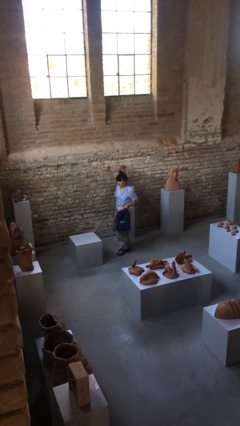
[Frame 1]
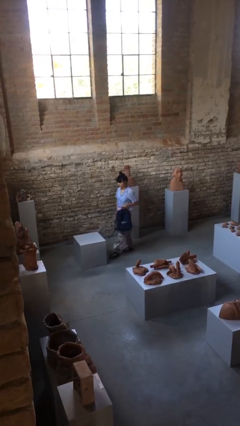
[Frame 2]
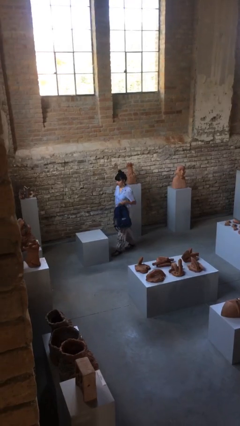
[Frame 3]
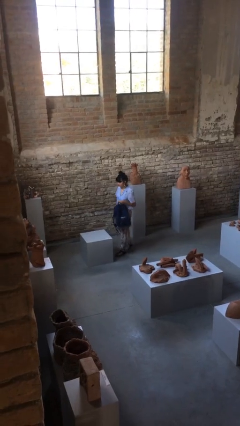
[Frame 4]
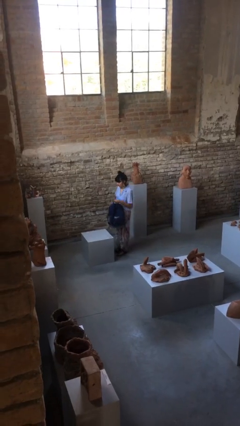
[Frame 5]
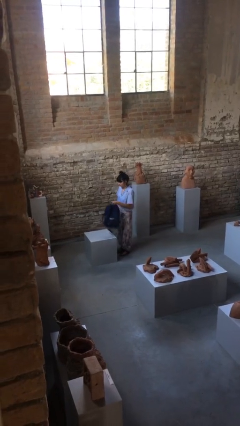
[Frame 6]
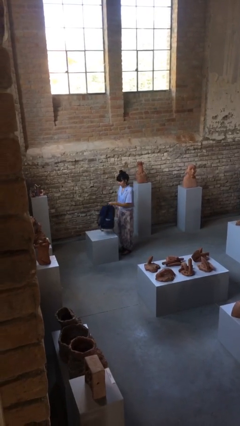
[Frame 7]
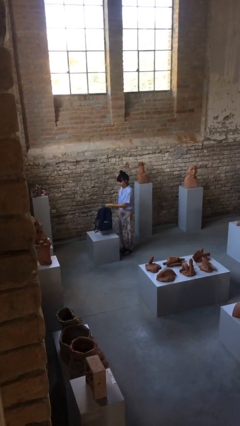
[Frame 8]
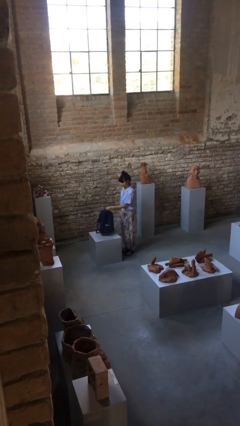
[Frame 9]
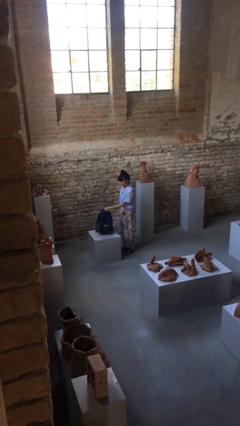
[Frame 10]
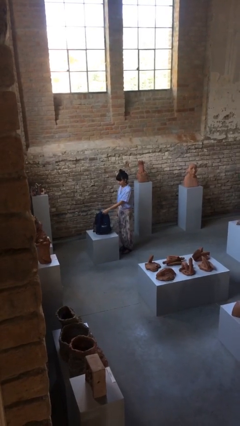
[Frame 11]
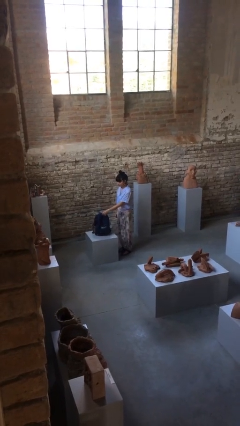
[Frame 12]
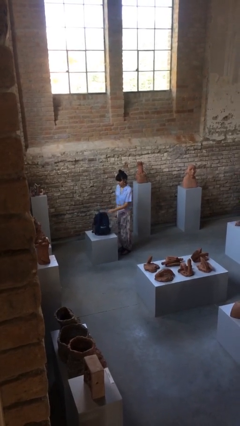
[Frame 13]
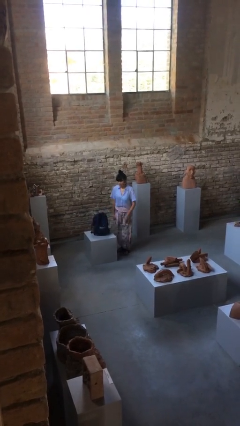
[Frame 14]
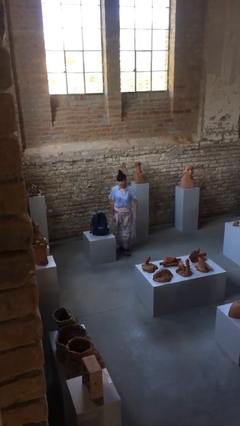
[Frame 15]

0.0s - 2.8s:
person puts down object on table

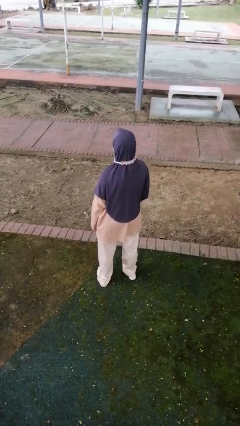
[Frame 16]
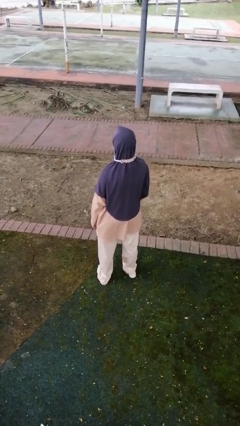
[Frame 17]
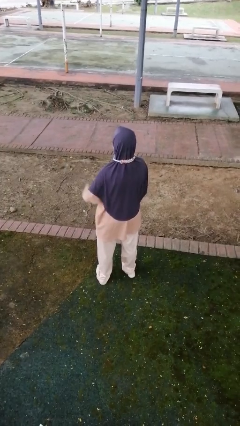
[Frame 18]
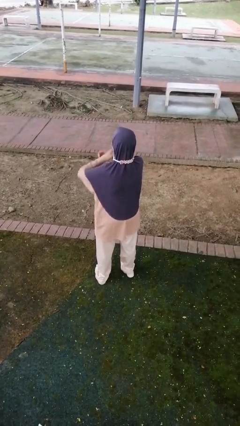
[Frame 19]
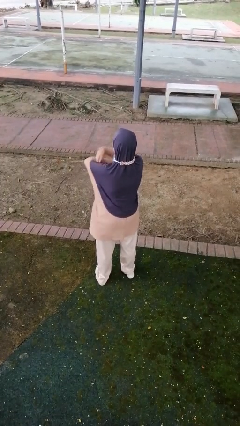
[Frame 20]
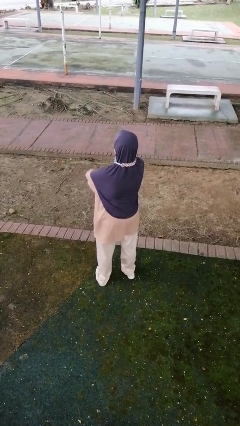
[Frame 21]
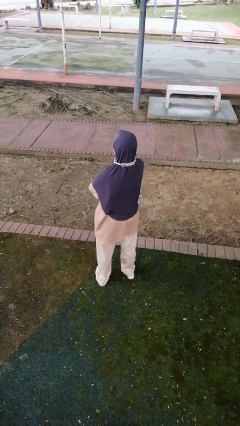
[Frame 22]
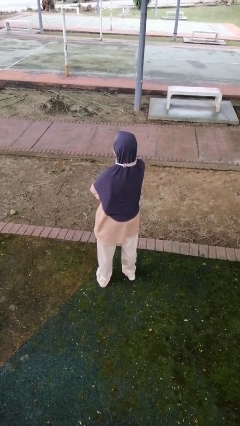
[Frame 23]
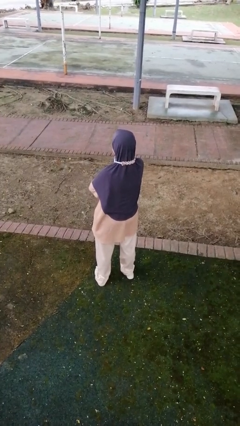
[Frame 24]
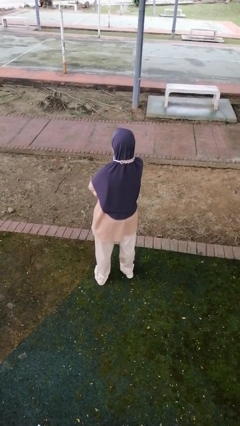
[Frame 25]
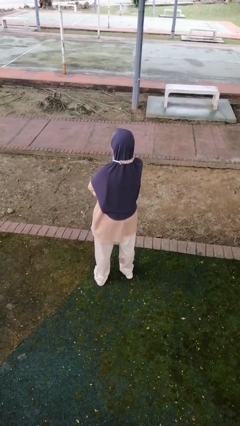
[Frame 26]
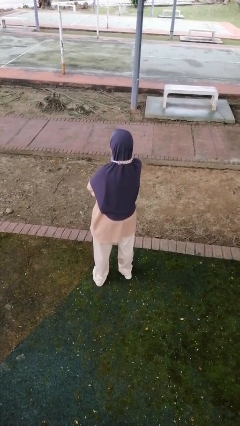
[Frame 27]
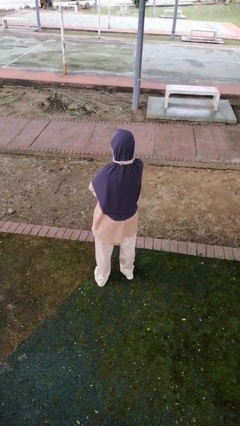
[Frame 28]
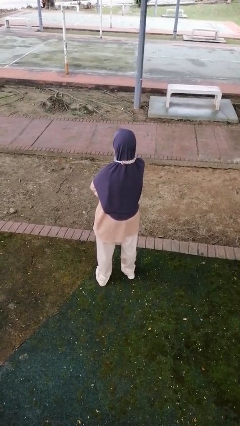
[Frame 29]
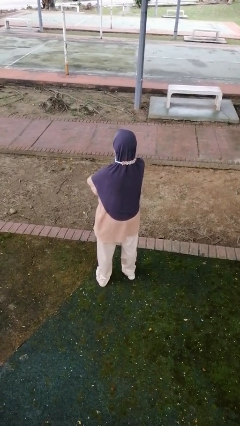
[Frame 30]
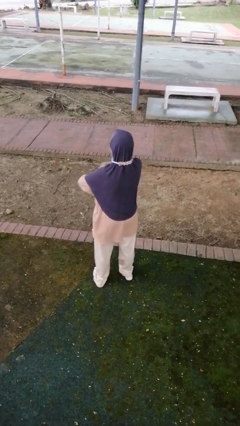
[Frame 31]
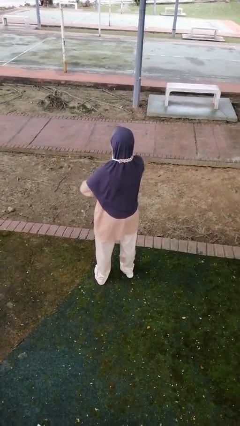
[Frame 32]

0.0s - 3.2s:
person crosses arms

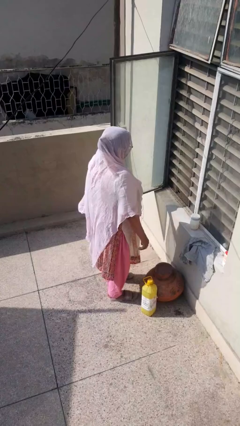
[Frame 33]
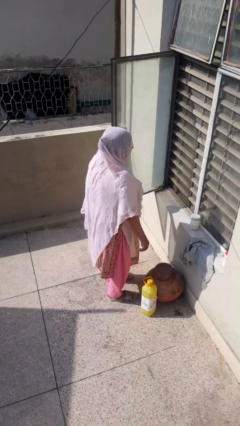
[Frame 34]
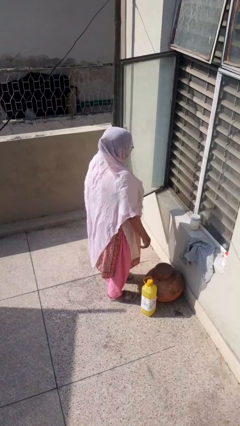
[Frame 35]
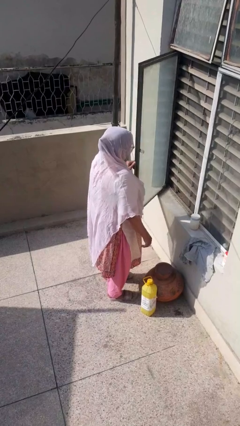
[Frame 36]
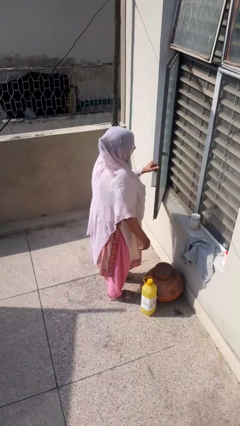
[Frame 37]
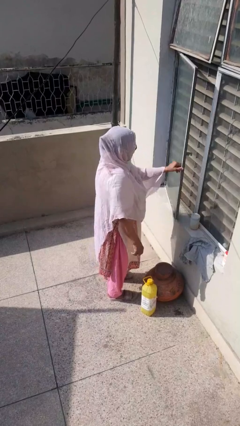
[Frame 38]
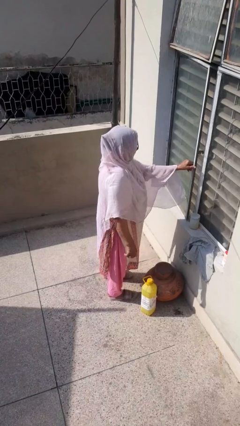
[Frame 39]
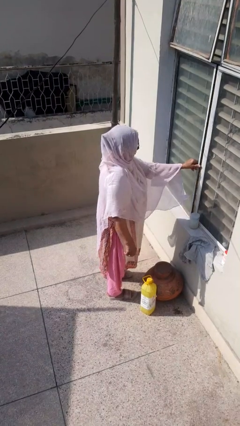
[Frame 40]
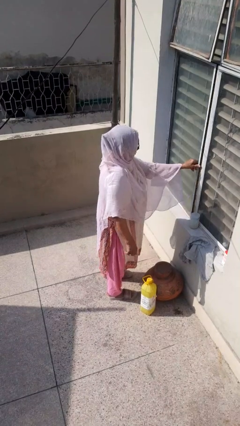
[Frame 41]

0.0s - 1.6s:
person closes home window

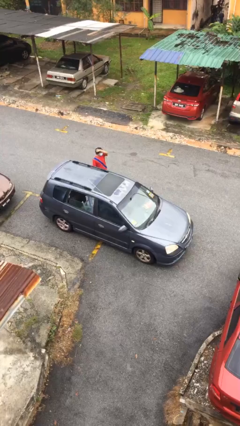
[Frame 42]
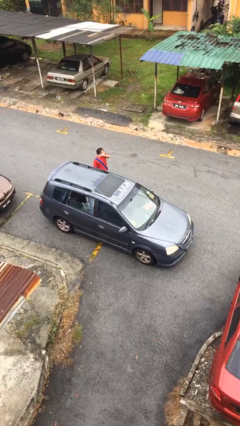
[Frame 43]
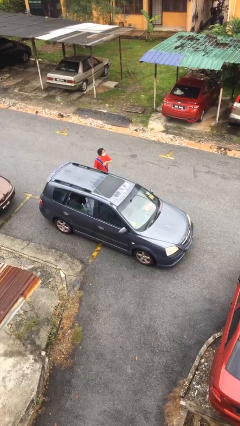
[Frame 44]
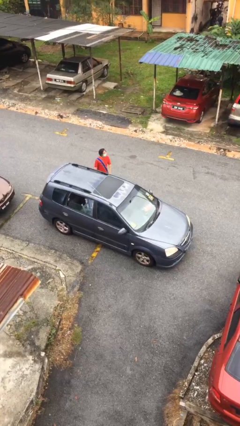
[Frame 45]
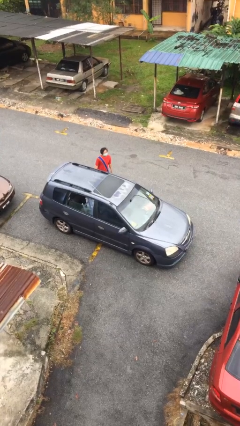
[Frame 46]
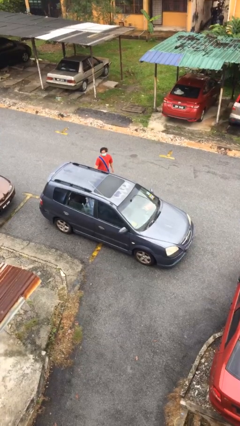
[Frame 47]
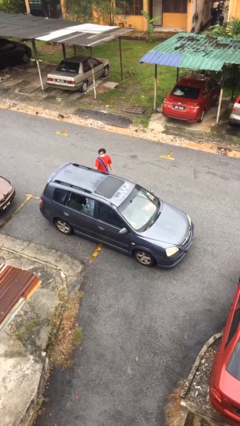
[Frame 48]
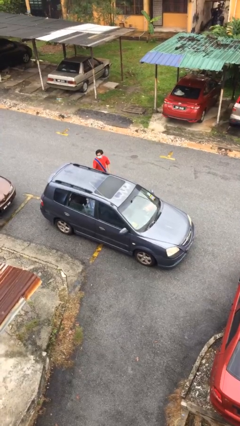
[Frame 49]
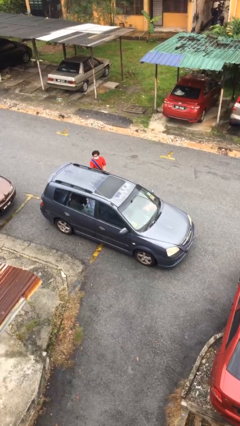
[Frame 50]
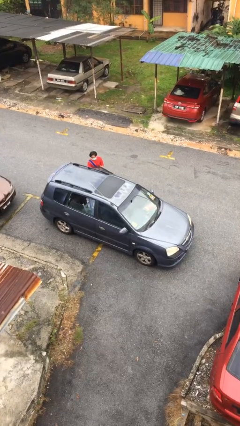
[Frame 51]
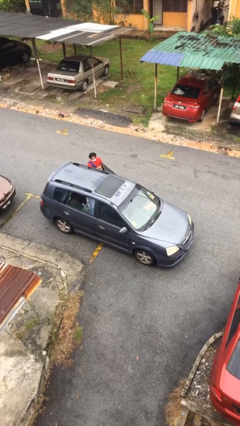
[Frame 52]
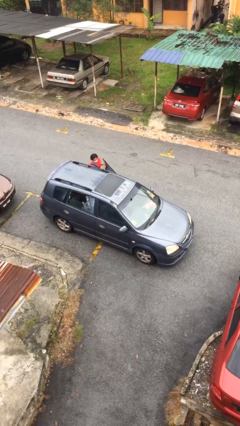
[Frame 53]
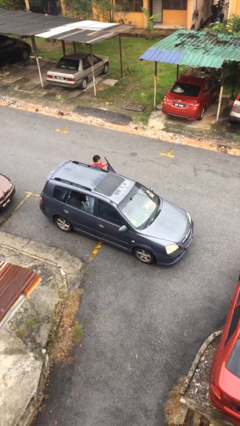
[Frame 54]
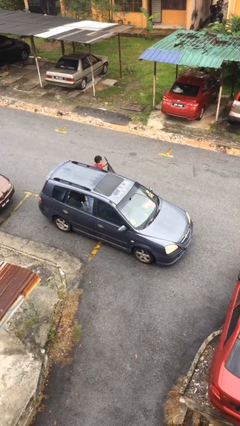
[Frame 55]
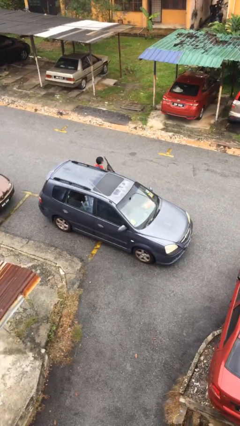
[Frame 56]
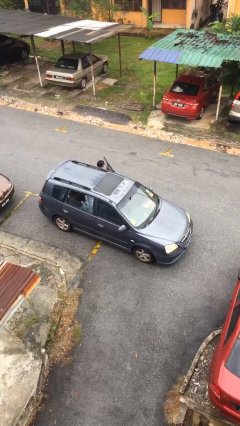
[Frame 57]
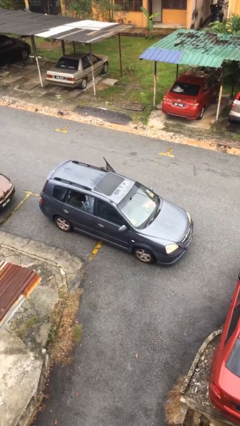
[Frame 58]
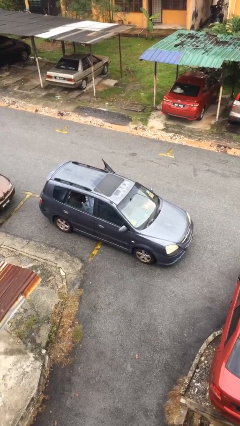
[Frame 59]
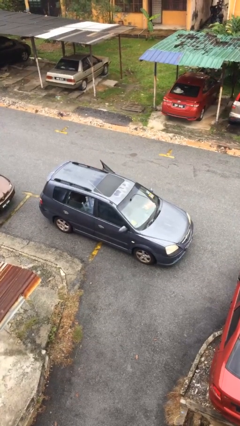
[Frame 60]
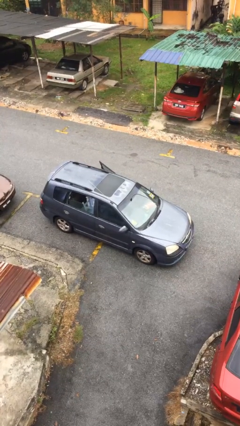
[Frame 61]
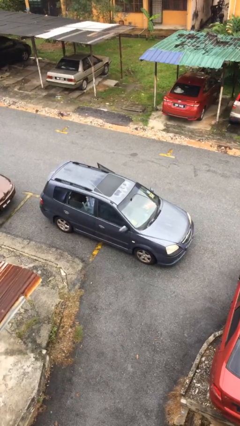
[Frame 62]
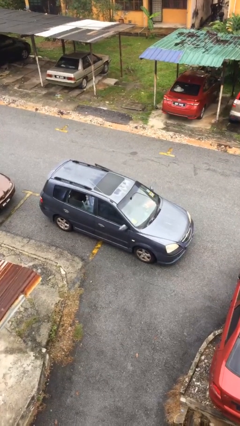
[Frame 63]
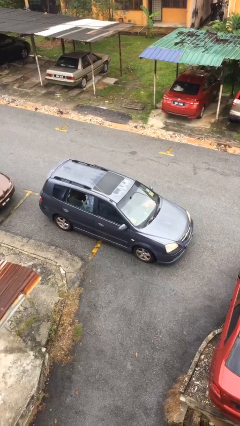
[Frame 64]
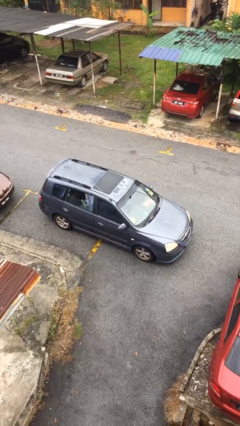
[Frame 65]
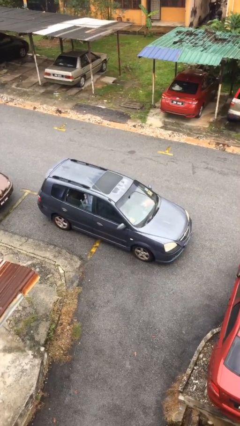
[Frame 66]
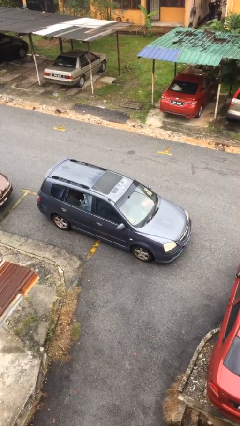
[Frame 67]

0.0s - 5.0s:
car picks up person

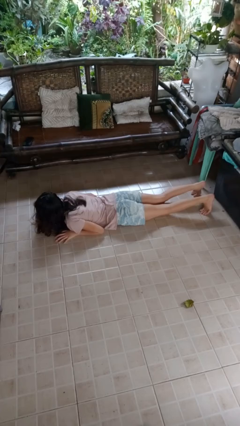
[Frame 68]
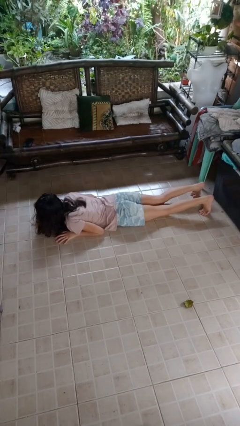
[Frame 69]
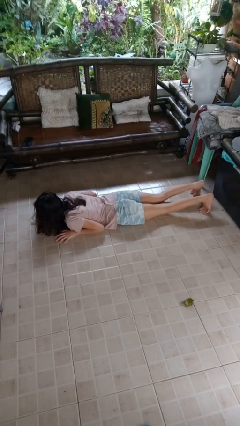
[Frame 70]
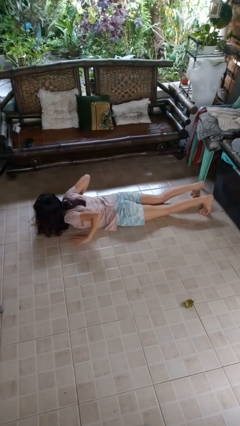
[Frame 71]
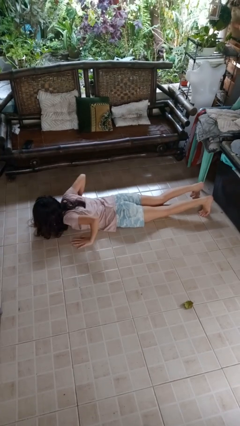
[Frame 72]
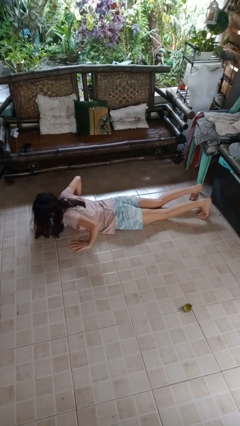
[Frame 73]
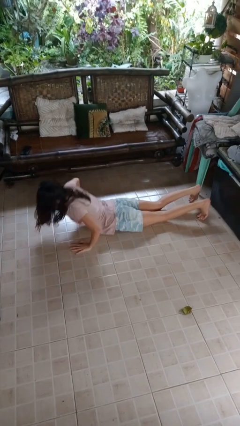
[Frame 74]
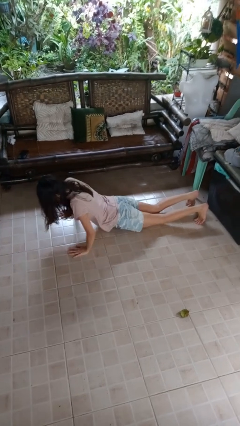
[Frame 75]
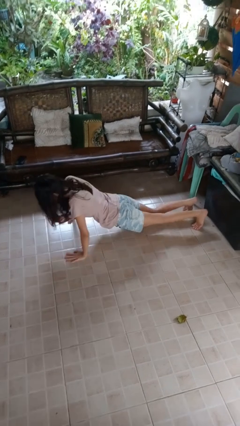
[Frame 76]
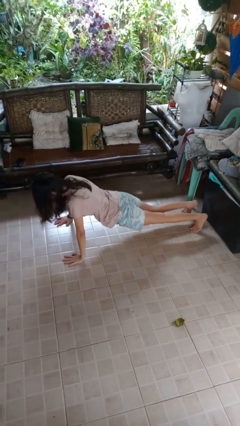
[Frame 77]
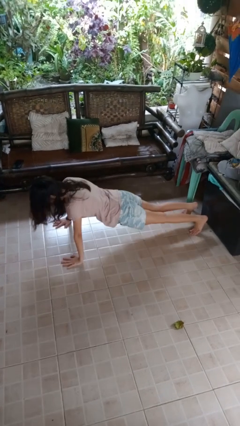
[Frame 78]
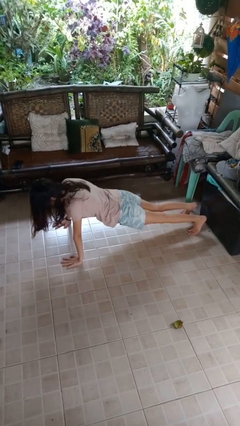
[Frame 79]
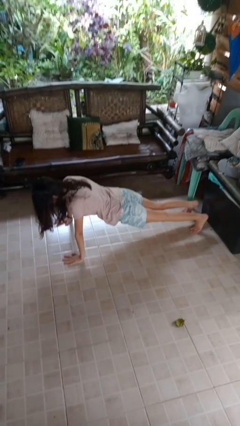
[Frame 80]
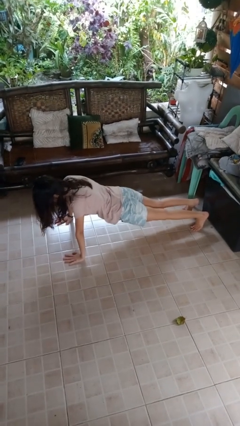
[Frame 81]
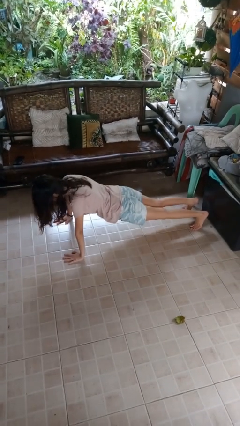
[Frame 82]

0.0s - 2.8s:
person exercises with pushup

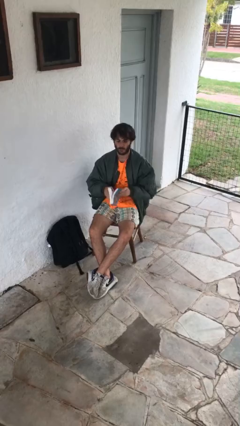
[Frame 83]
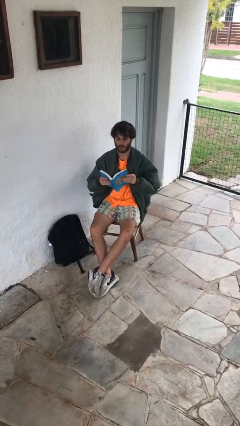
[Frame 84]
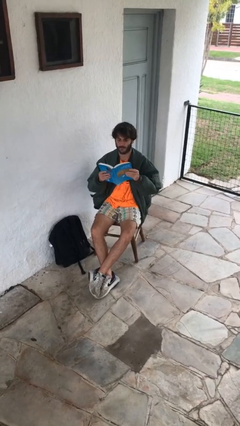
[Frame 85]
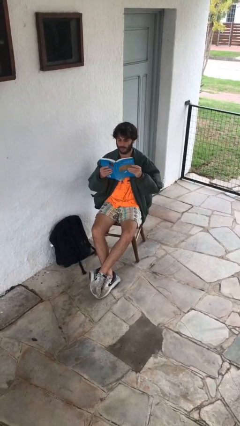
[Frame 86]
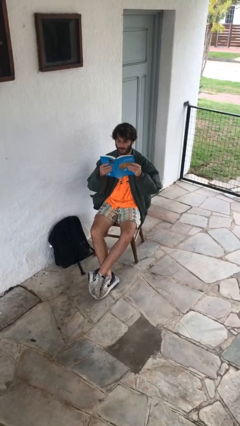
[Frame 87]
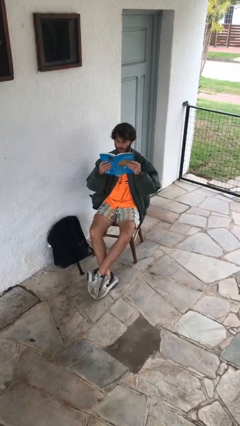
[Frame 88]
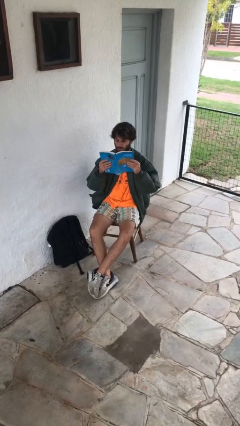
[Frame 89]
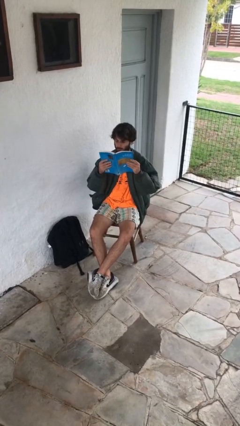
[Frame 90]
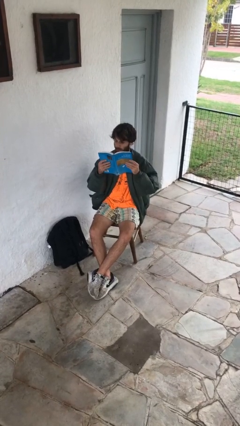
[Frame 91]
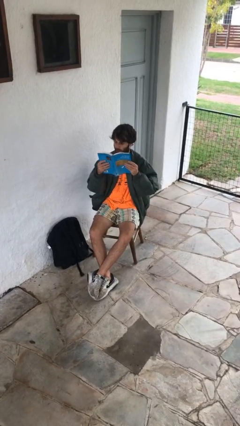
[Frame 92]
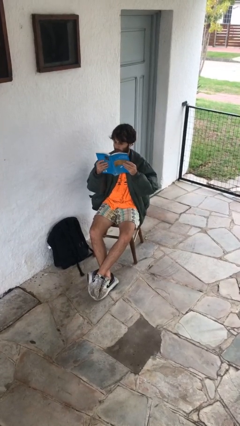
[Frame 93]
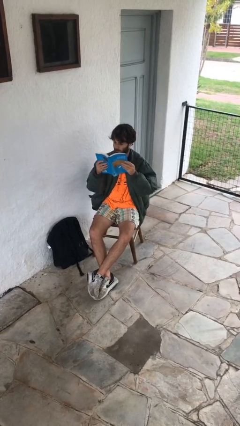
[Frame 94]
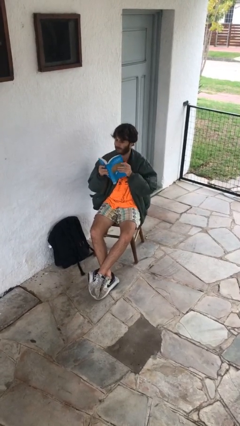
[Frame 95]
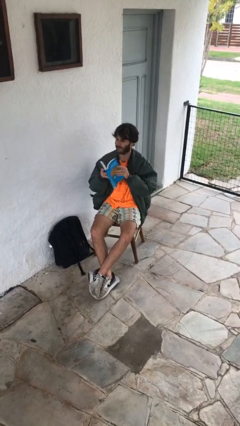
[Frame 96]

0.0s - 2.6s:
person reads document
